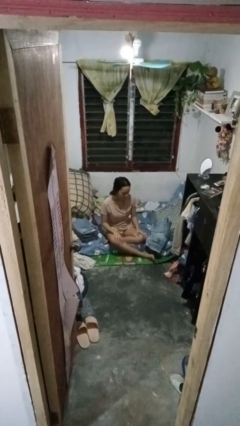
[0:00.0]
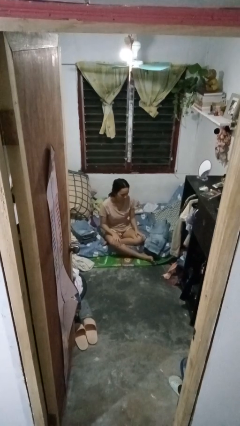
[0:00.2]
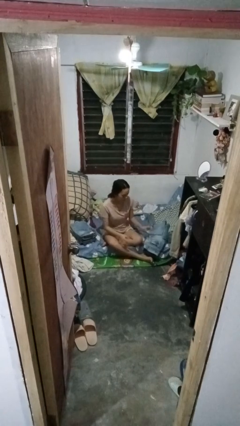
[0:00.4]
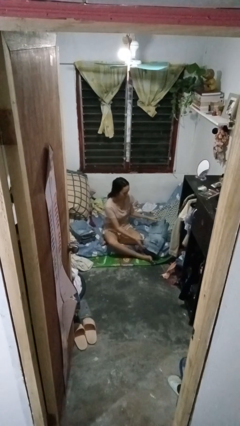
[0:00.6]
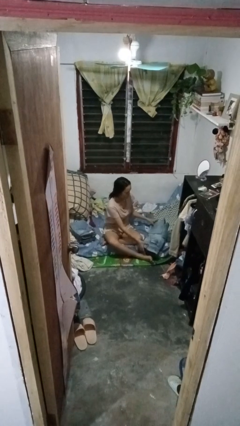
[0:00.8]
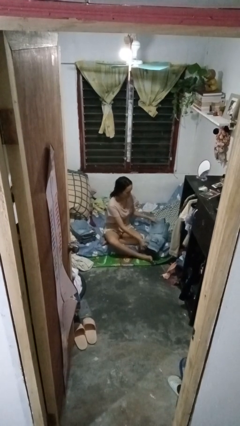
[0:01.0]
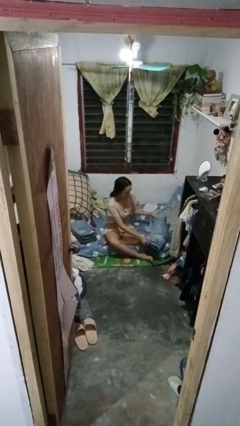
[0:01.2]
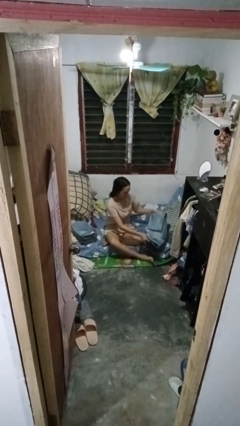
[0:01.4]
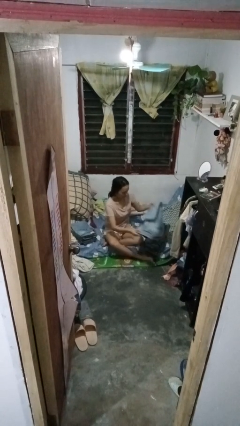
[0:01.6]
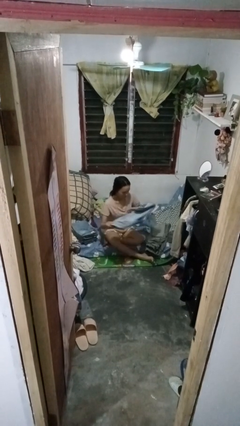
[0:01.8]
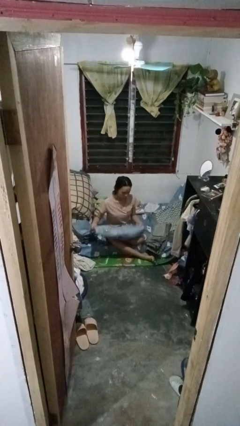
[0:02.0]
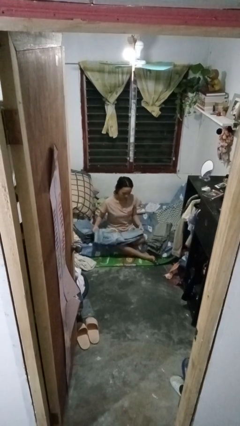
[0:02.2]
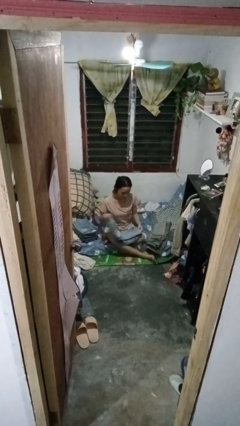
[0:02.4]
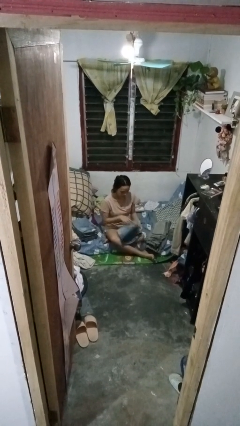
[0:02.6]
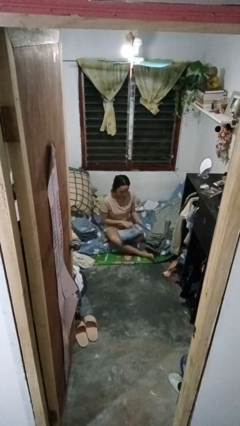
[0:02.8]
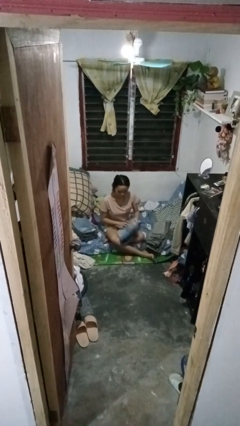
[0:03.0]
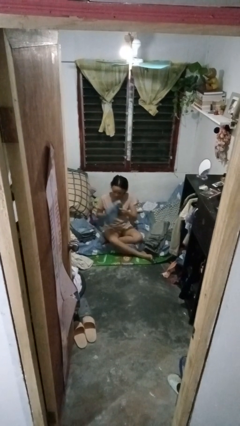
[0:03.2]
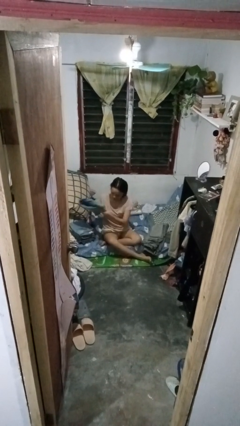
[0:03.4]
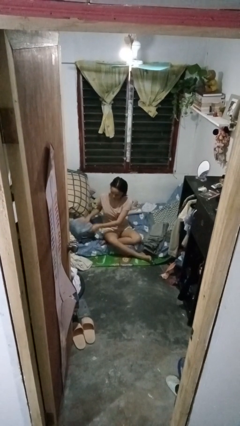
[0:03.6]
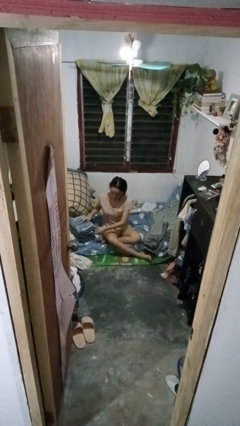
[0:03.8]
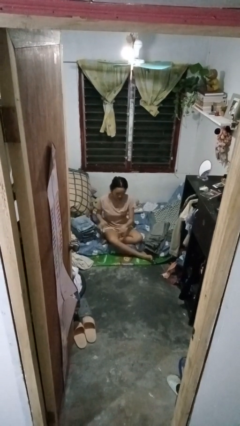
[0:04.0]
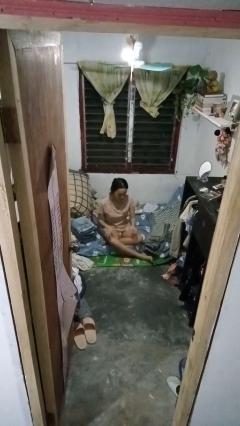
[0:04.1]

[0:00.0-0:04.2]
person folds pants

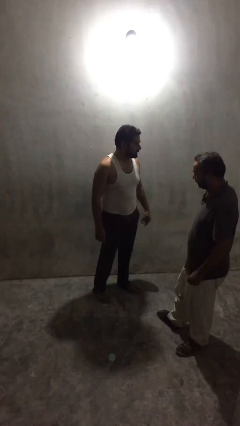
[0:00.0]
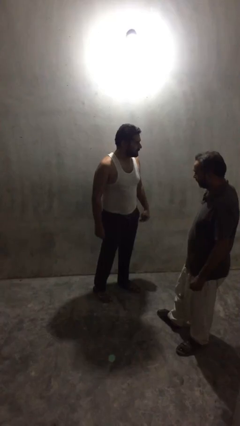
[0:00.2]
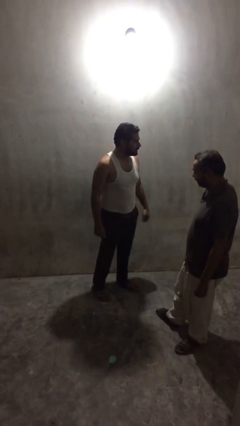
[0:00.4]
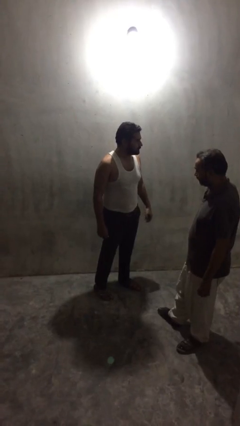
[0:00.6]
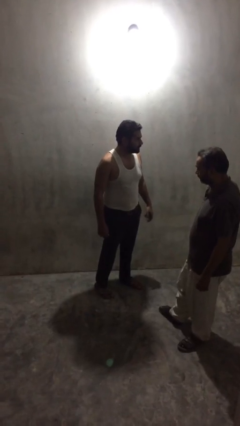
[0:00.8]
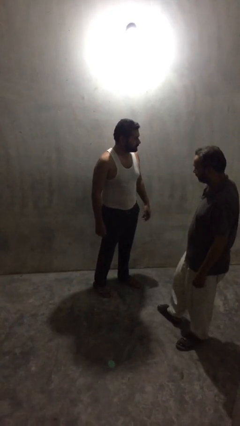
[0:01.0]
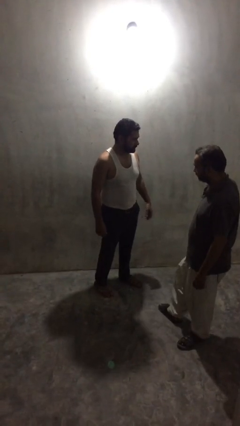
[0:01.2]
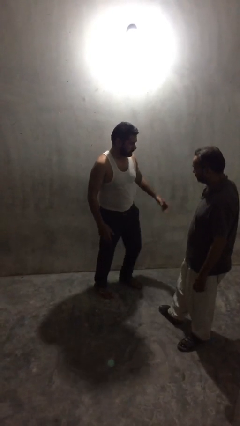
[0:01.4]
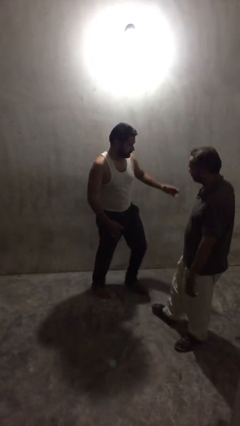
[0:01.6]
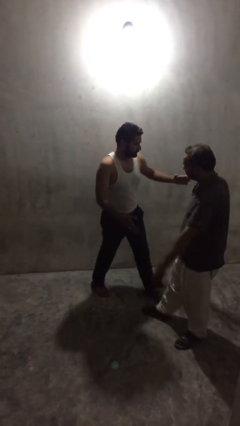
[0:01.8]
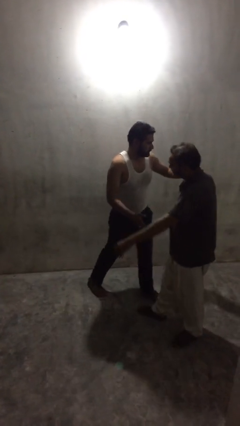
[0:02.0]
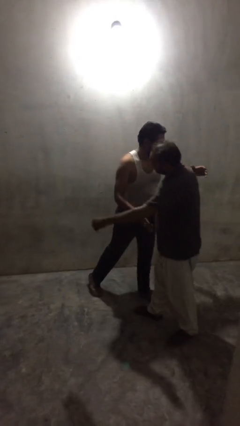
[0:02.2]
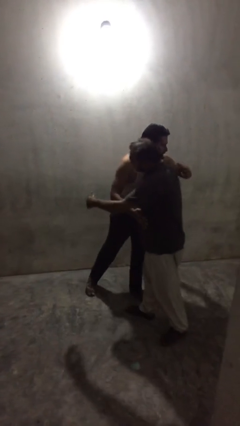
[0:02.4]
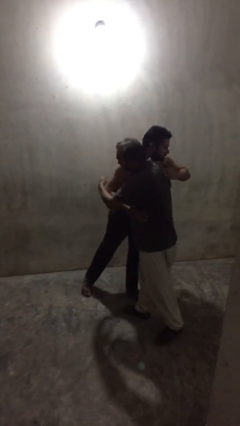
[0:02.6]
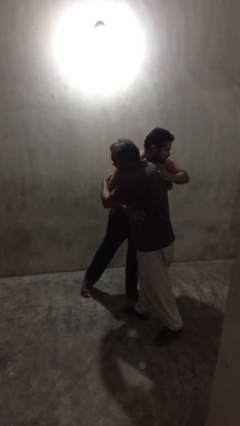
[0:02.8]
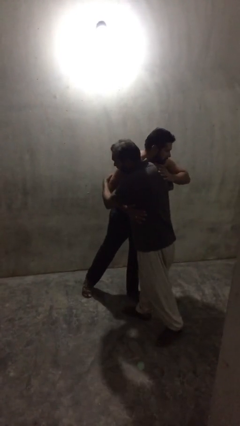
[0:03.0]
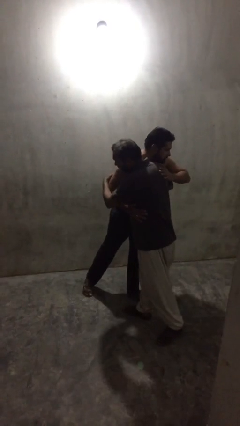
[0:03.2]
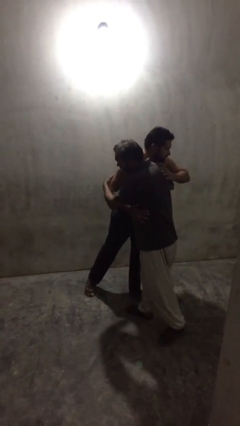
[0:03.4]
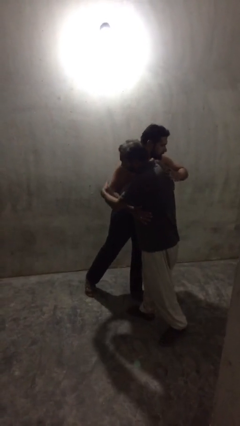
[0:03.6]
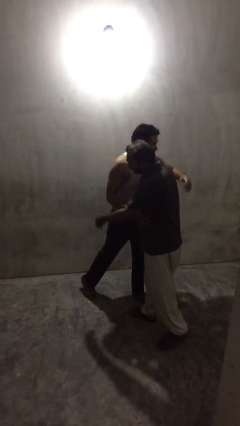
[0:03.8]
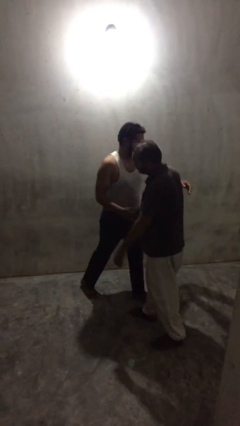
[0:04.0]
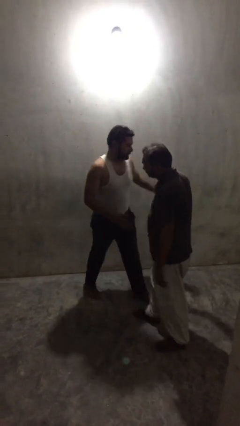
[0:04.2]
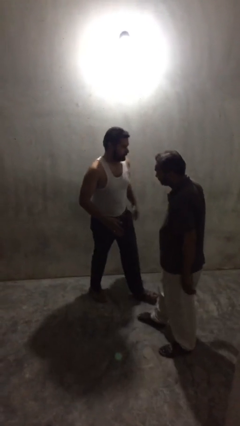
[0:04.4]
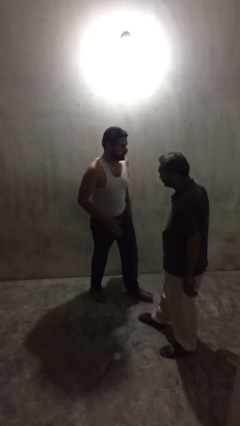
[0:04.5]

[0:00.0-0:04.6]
person embraces person

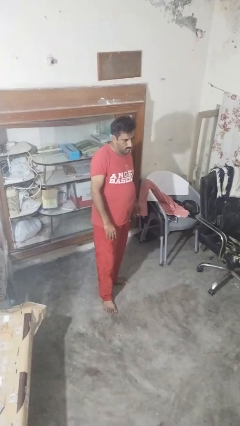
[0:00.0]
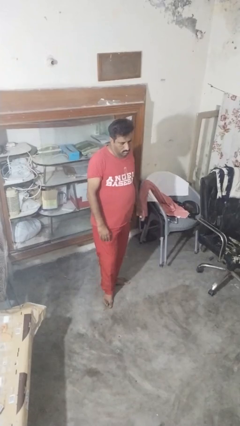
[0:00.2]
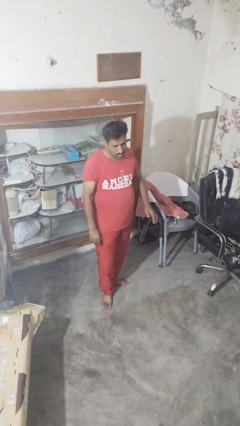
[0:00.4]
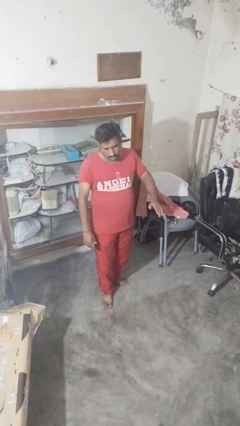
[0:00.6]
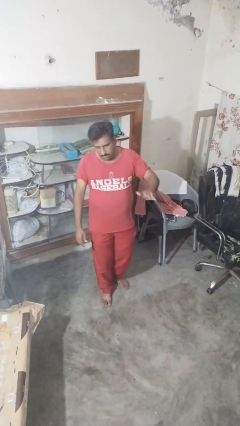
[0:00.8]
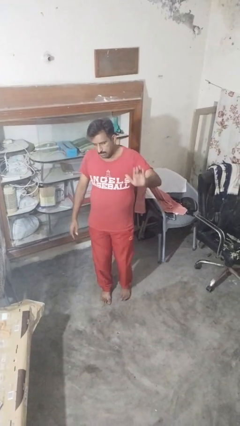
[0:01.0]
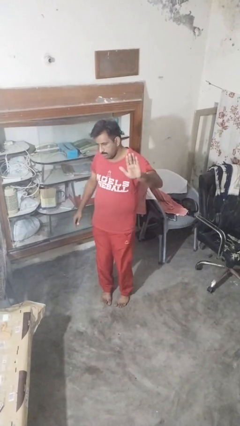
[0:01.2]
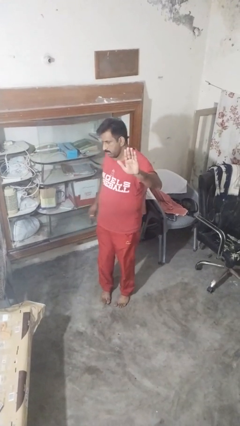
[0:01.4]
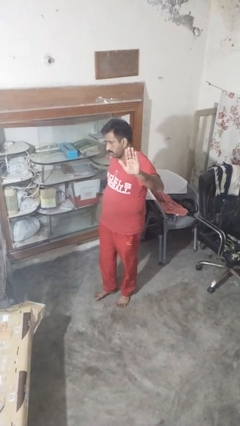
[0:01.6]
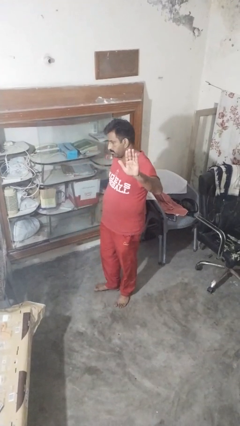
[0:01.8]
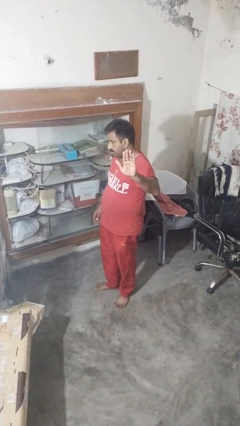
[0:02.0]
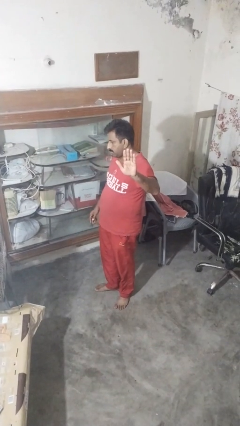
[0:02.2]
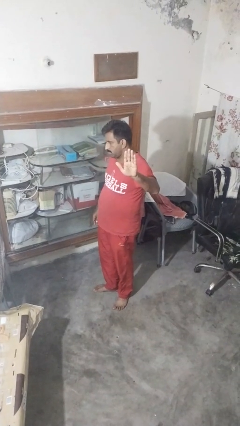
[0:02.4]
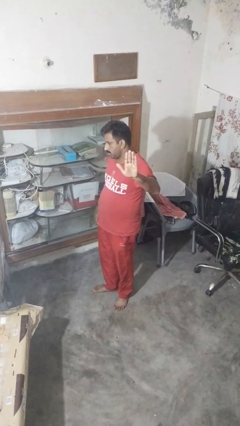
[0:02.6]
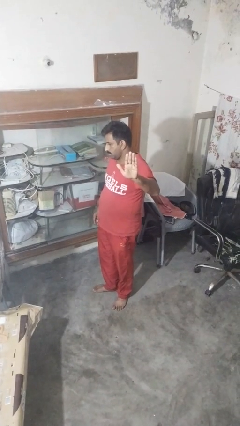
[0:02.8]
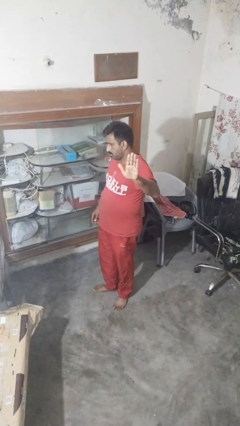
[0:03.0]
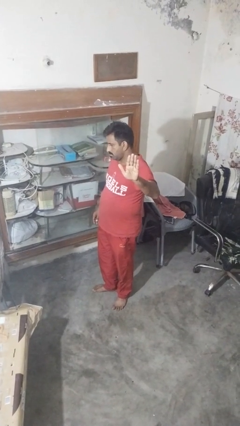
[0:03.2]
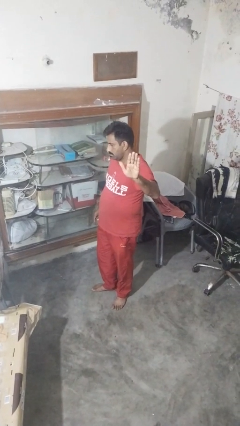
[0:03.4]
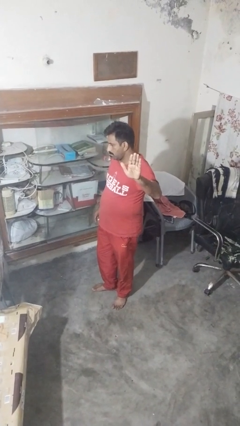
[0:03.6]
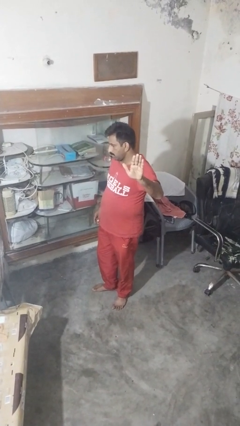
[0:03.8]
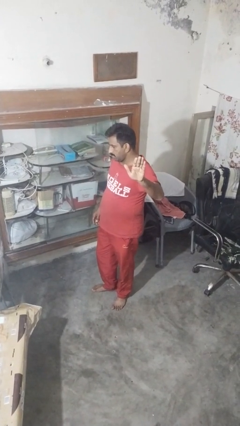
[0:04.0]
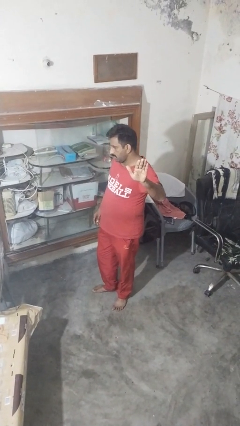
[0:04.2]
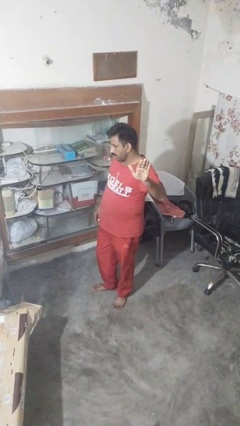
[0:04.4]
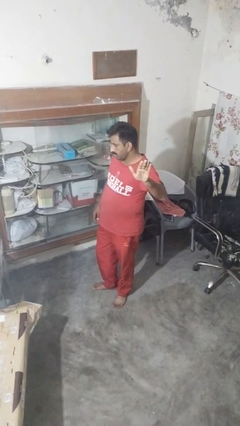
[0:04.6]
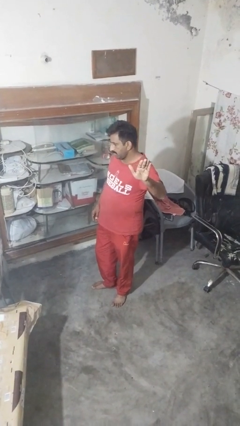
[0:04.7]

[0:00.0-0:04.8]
person gestures number five

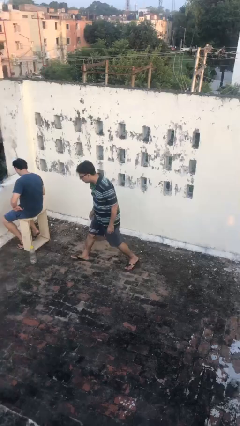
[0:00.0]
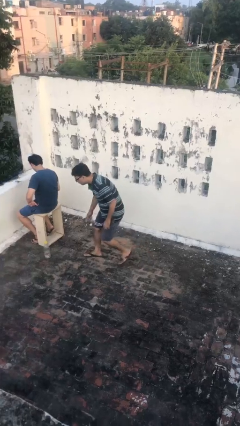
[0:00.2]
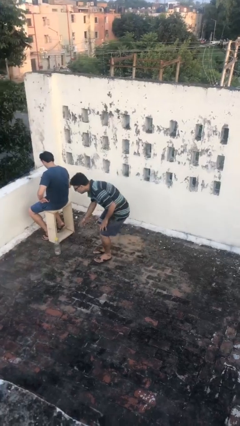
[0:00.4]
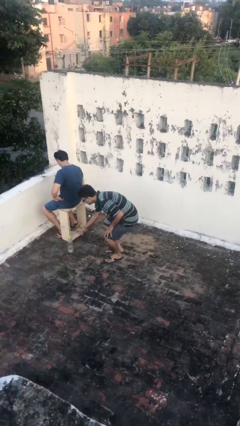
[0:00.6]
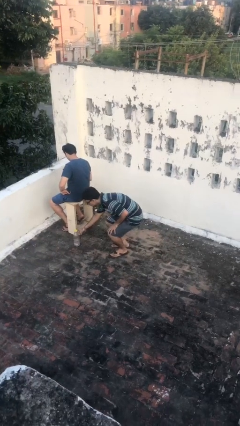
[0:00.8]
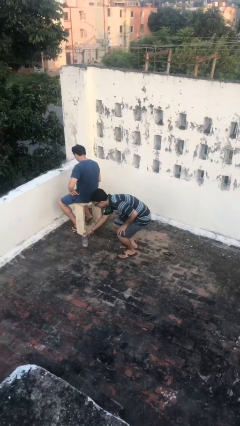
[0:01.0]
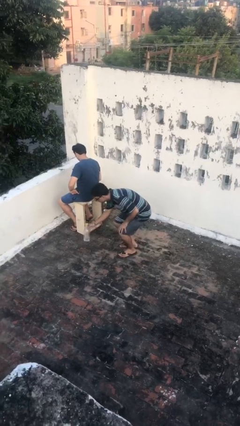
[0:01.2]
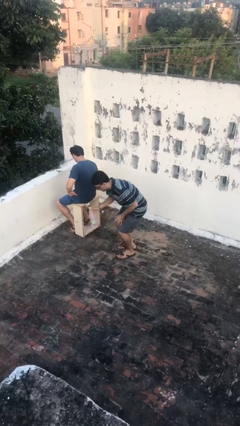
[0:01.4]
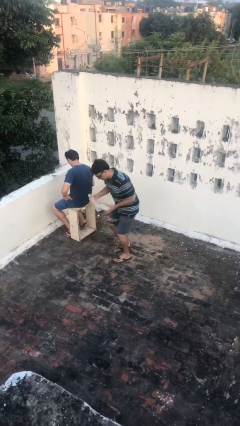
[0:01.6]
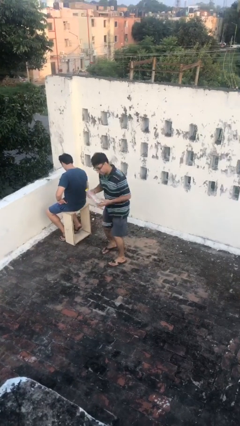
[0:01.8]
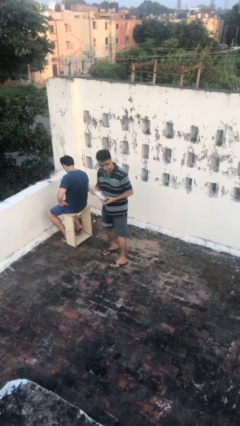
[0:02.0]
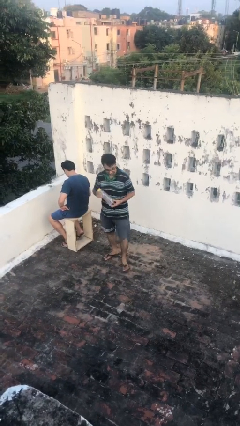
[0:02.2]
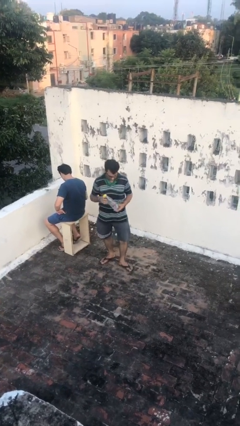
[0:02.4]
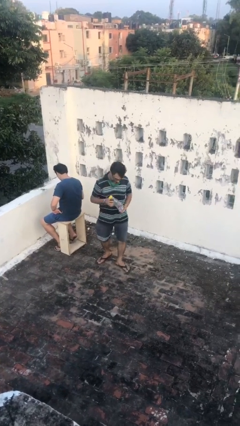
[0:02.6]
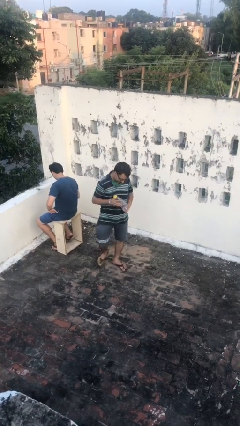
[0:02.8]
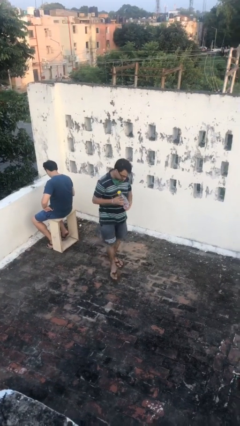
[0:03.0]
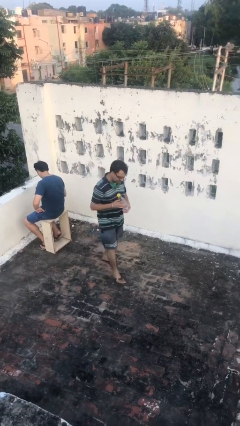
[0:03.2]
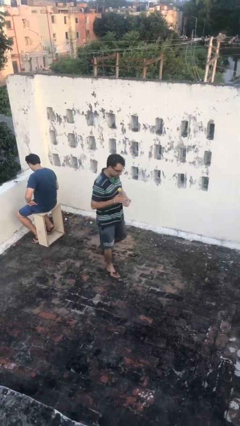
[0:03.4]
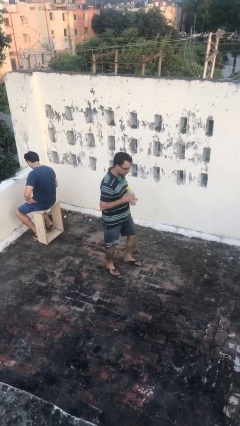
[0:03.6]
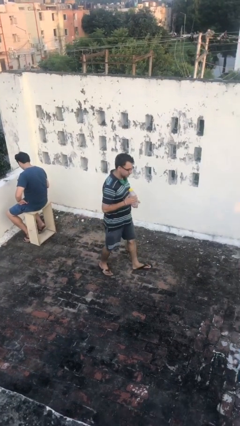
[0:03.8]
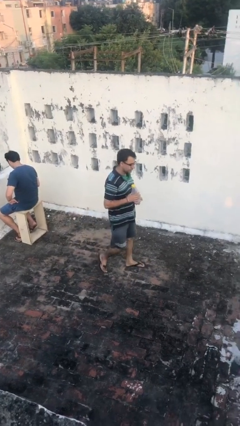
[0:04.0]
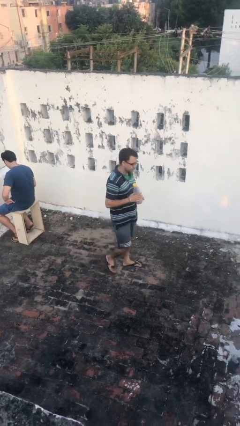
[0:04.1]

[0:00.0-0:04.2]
person steals object from person

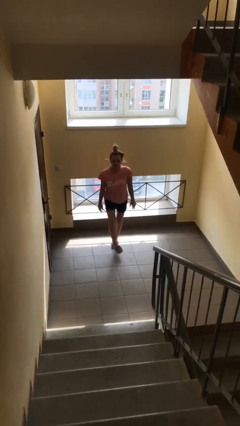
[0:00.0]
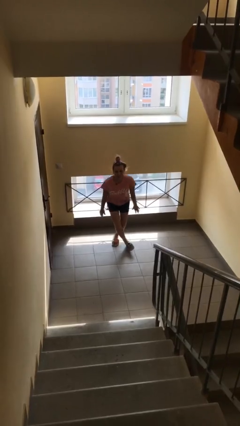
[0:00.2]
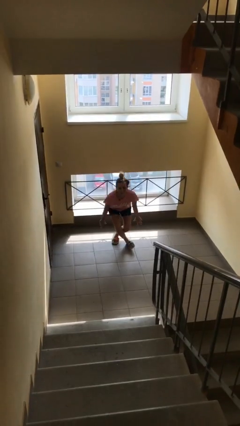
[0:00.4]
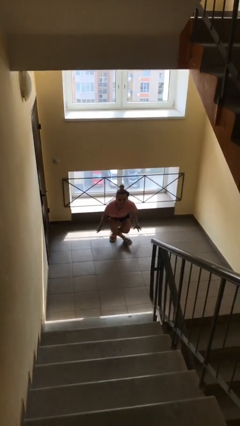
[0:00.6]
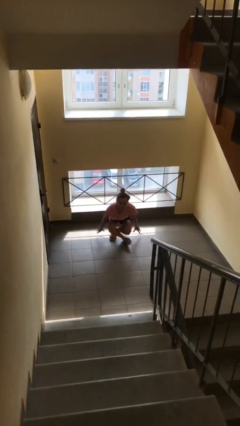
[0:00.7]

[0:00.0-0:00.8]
person sits crisscross
